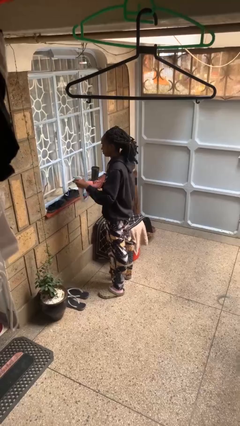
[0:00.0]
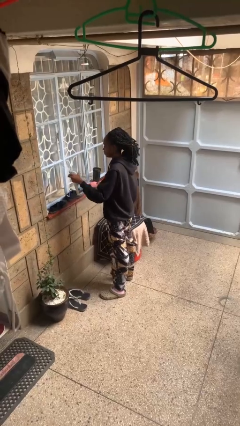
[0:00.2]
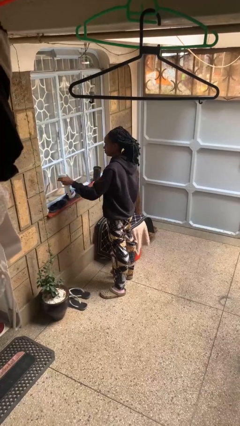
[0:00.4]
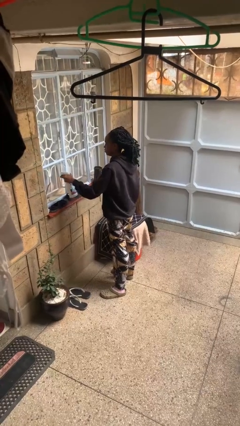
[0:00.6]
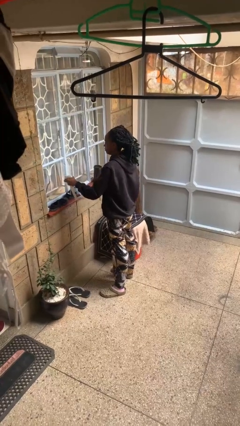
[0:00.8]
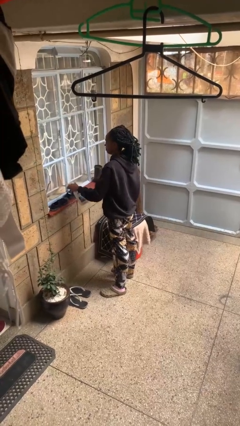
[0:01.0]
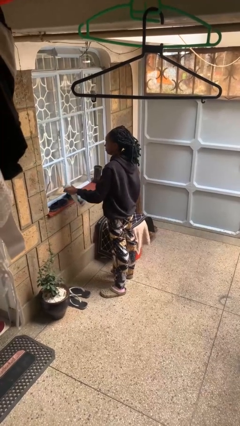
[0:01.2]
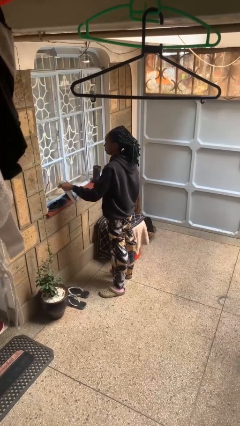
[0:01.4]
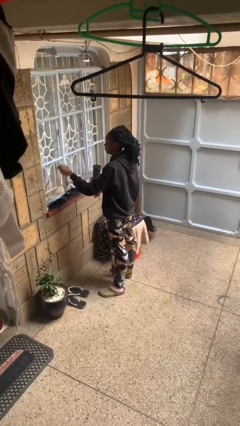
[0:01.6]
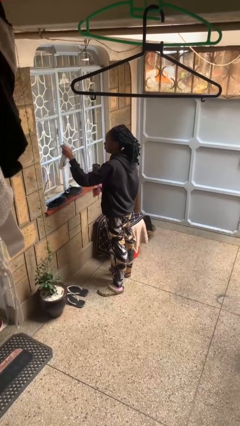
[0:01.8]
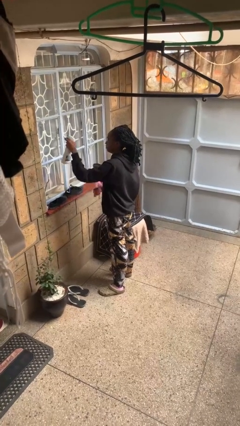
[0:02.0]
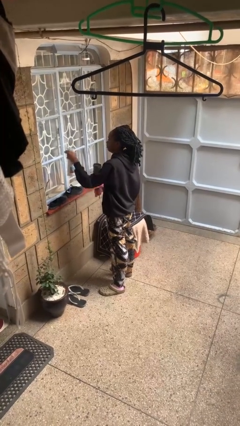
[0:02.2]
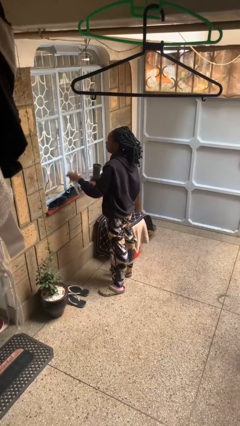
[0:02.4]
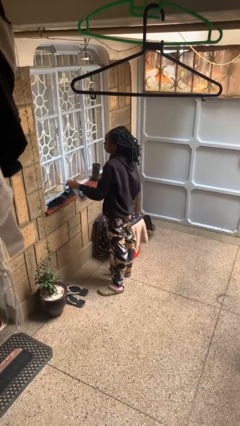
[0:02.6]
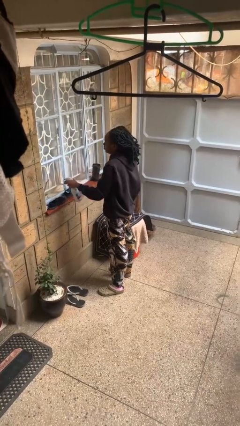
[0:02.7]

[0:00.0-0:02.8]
person sprays from bottle

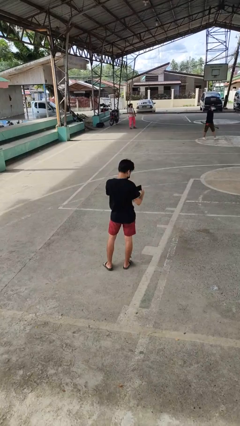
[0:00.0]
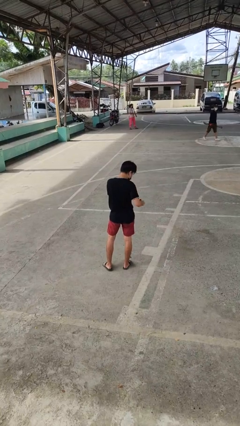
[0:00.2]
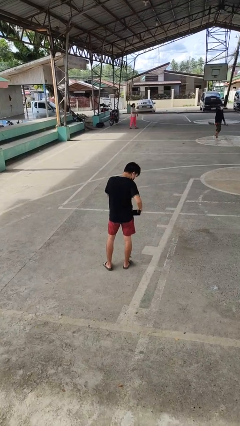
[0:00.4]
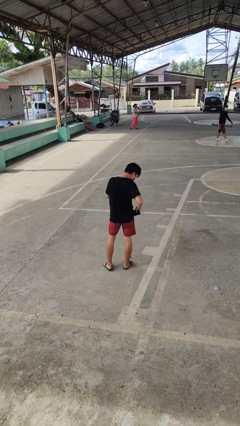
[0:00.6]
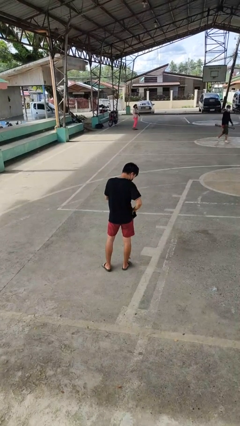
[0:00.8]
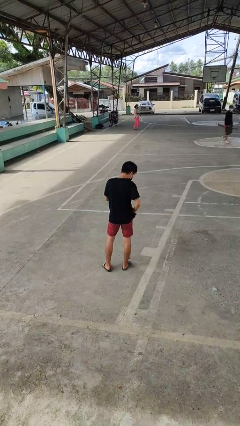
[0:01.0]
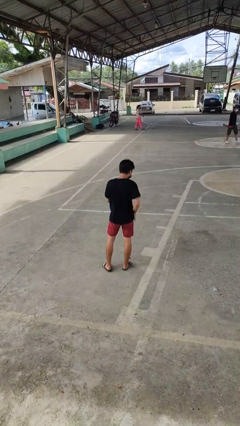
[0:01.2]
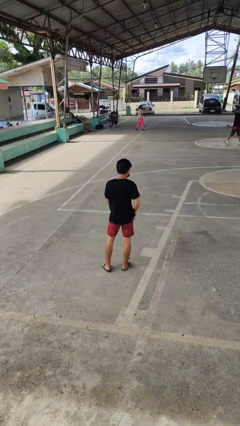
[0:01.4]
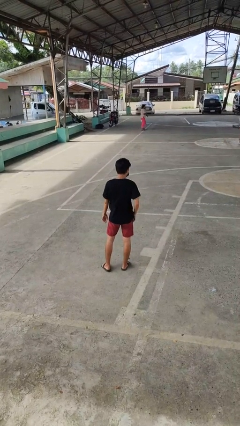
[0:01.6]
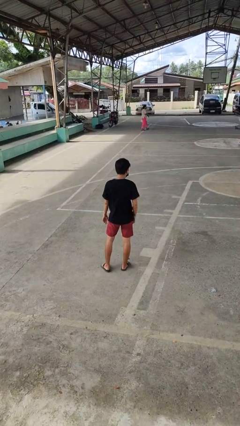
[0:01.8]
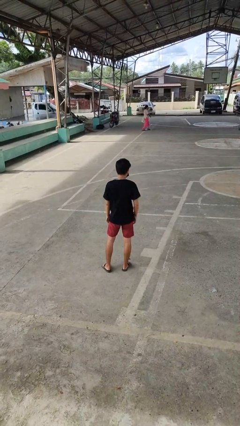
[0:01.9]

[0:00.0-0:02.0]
person puts phone into pocket

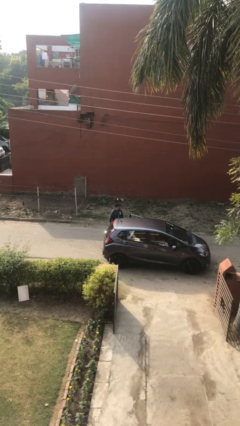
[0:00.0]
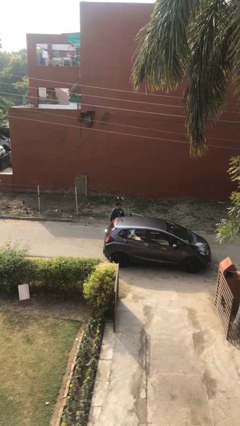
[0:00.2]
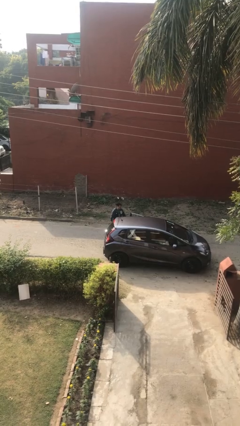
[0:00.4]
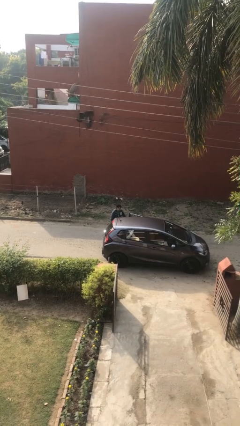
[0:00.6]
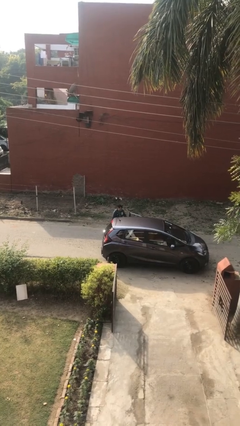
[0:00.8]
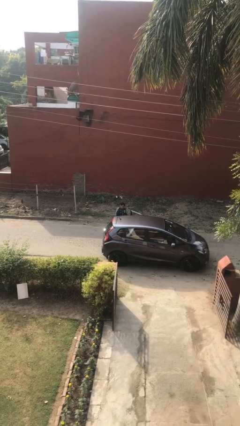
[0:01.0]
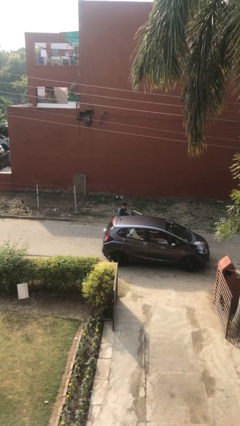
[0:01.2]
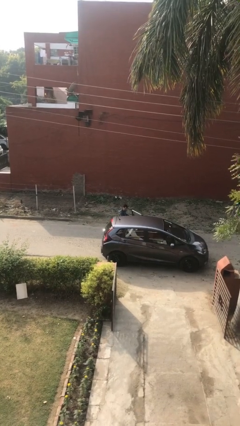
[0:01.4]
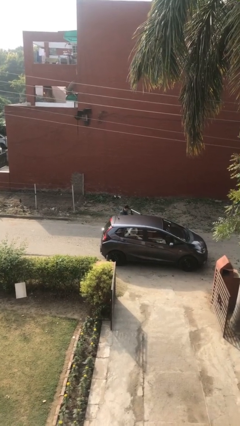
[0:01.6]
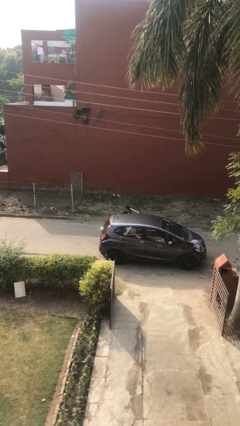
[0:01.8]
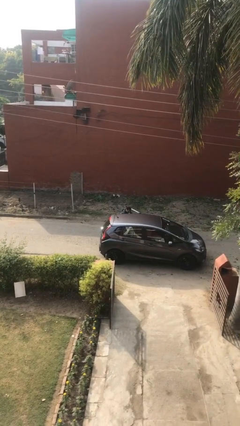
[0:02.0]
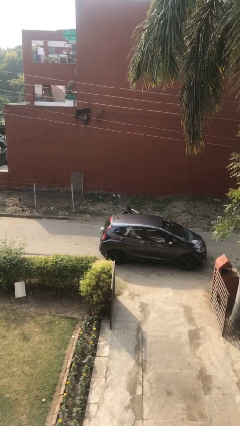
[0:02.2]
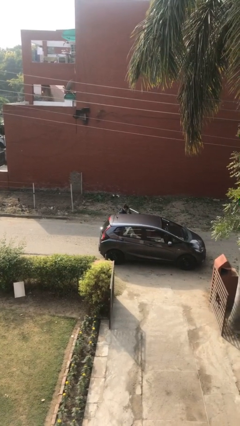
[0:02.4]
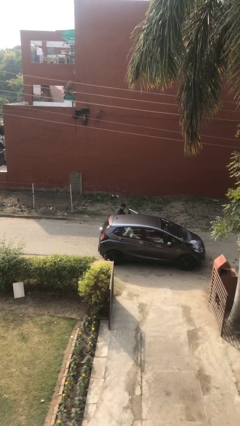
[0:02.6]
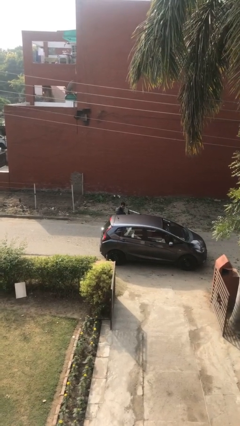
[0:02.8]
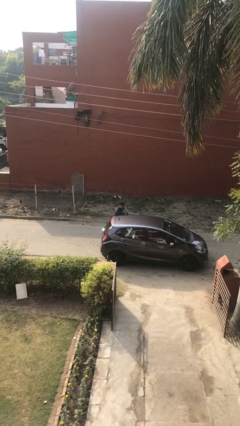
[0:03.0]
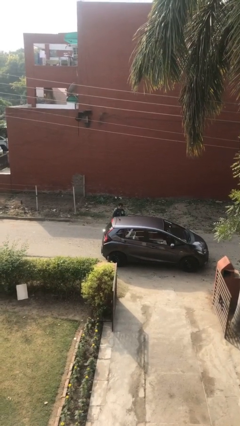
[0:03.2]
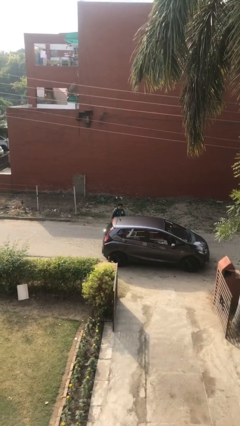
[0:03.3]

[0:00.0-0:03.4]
person loads car

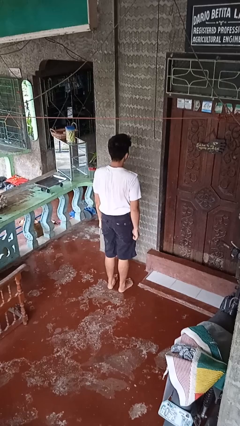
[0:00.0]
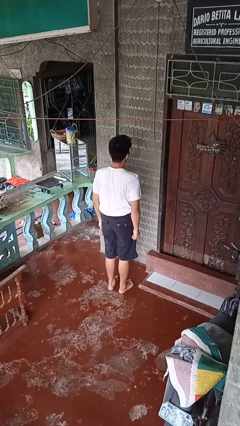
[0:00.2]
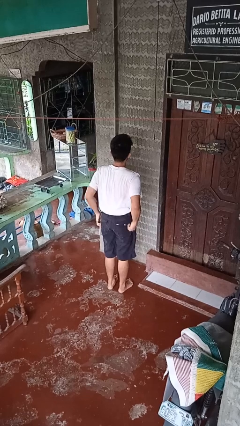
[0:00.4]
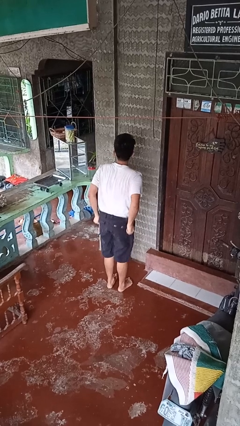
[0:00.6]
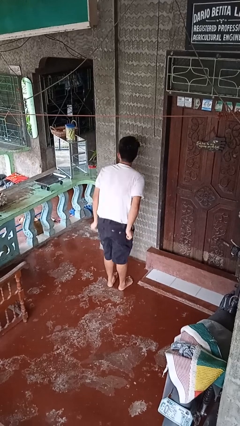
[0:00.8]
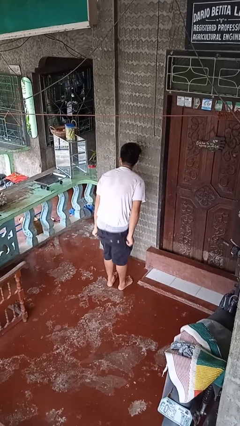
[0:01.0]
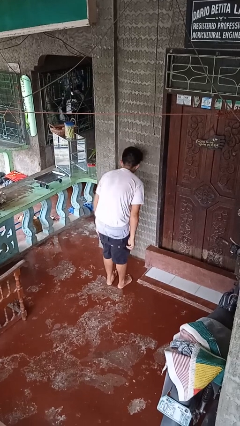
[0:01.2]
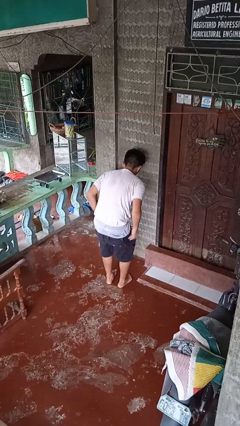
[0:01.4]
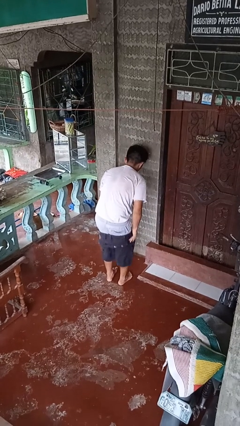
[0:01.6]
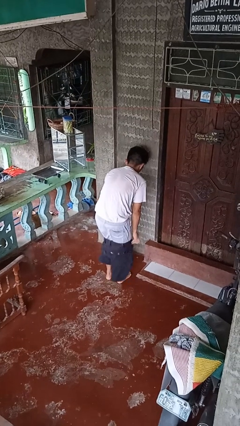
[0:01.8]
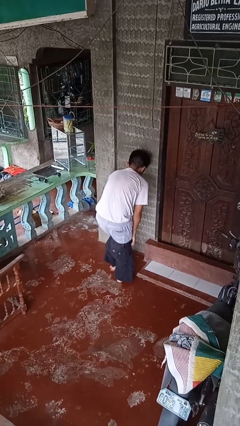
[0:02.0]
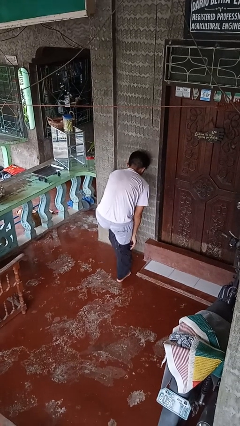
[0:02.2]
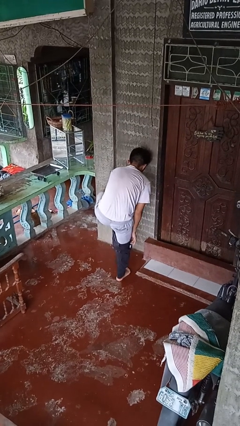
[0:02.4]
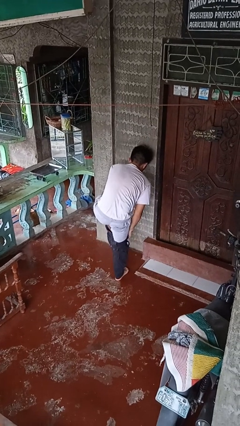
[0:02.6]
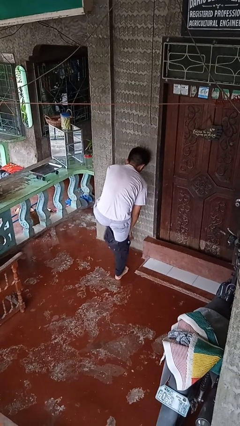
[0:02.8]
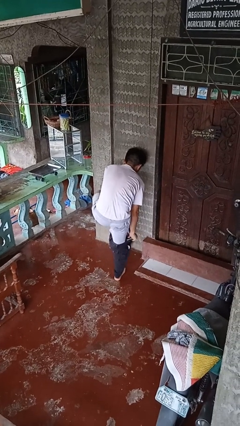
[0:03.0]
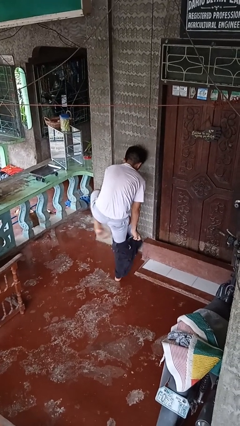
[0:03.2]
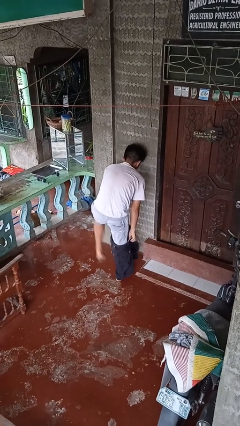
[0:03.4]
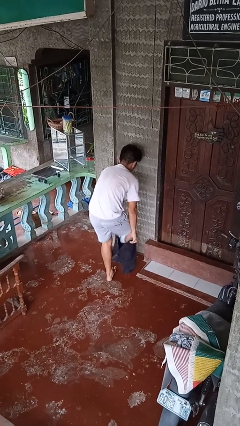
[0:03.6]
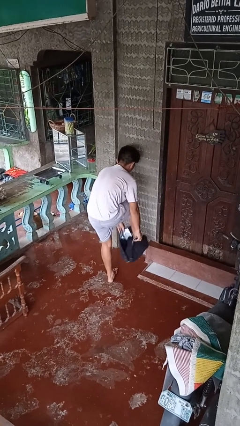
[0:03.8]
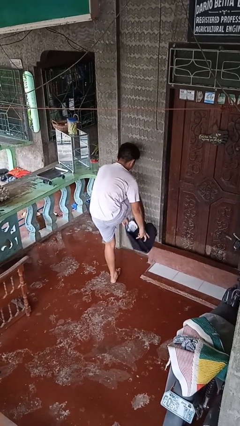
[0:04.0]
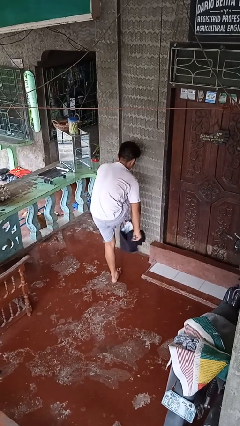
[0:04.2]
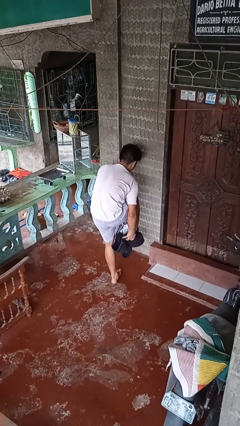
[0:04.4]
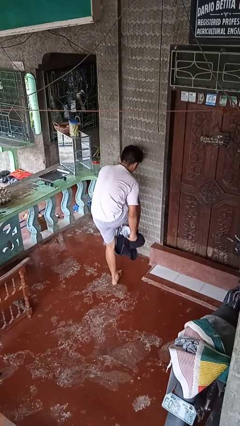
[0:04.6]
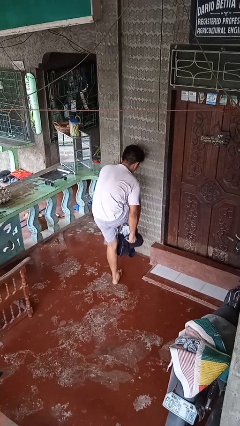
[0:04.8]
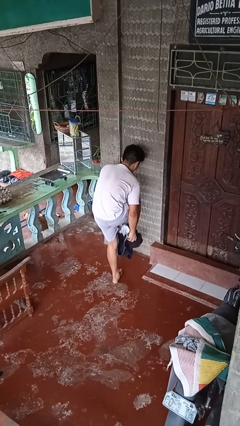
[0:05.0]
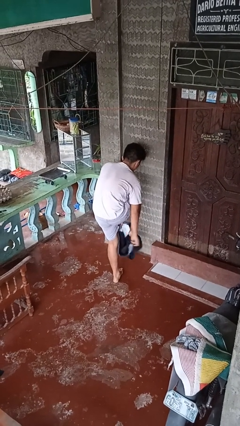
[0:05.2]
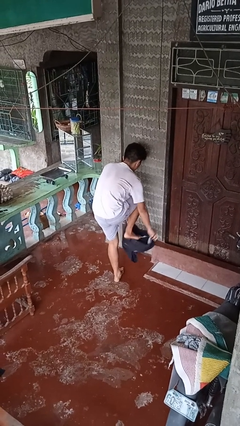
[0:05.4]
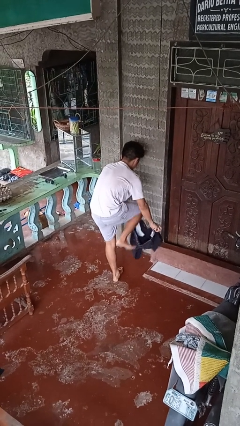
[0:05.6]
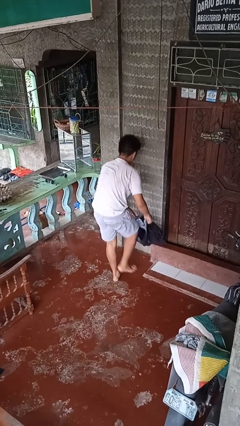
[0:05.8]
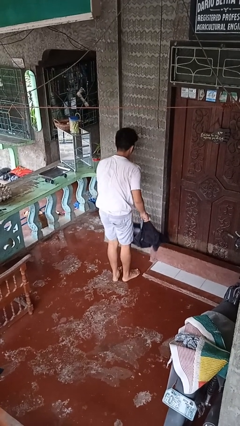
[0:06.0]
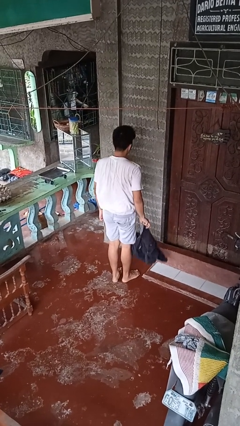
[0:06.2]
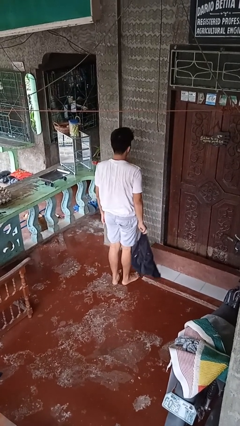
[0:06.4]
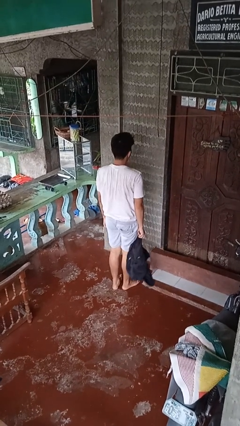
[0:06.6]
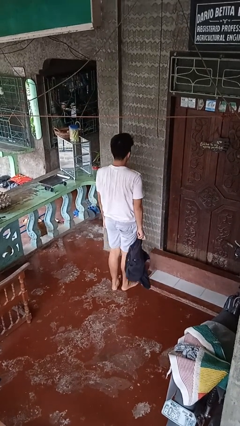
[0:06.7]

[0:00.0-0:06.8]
person takes off pants

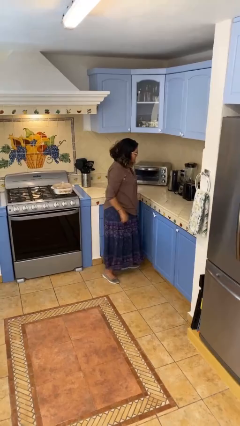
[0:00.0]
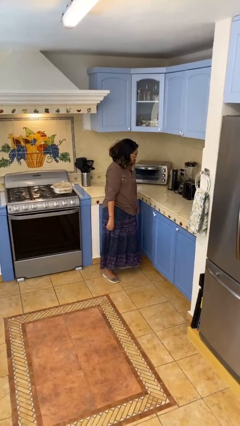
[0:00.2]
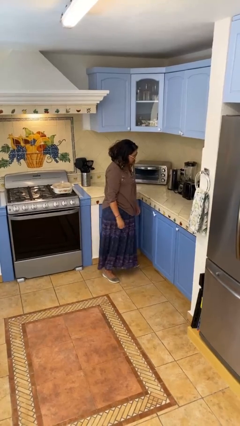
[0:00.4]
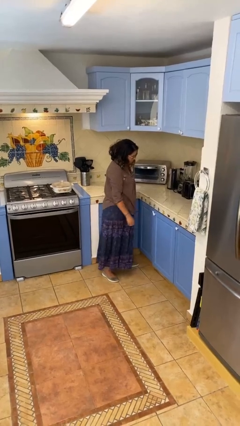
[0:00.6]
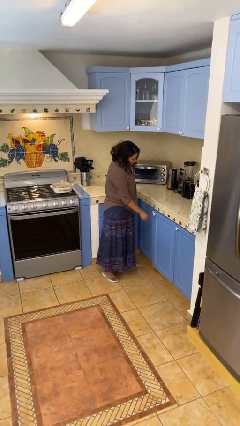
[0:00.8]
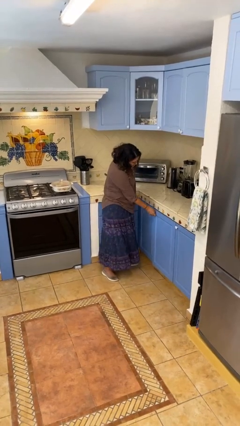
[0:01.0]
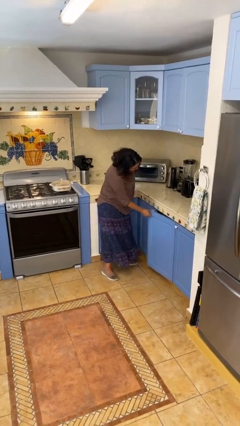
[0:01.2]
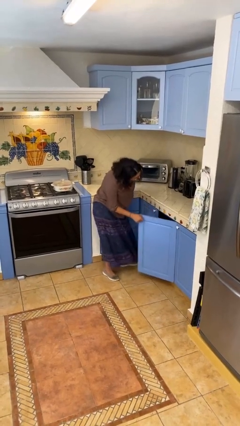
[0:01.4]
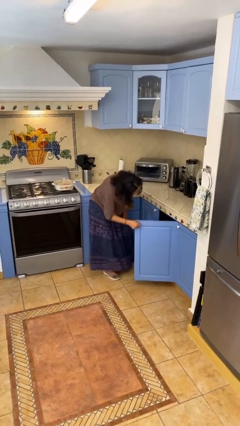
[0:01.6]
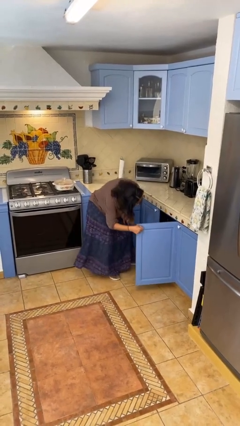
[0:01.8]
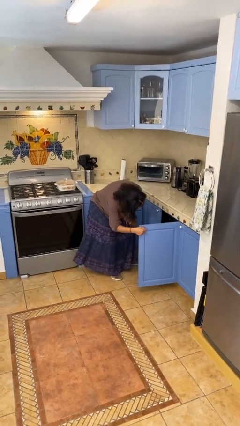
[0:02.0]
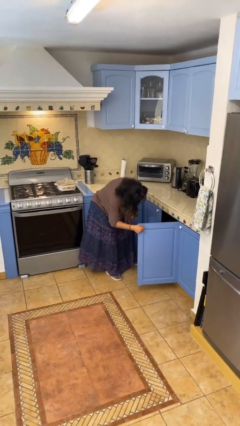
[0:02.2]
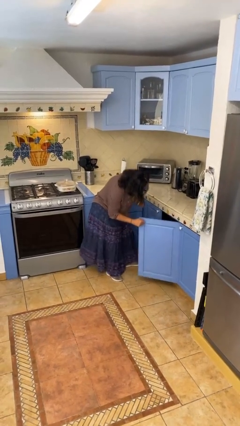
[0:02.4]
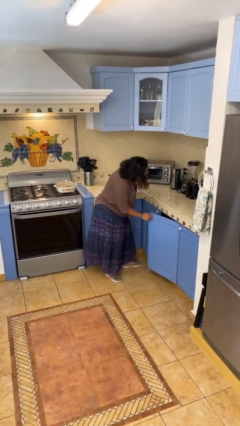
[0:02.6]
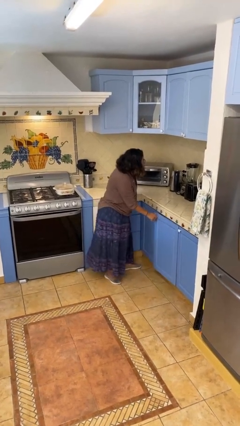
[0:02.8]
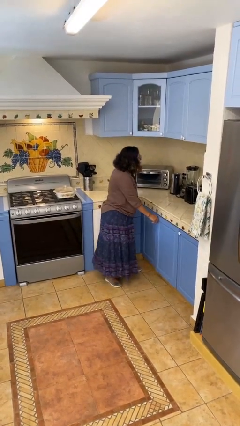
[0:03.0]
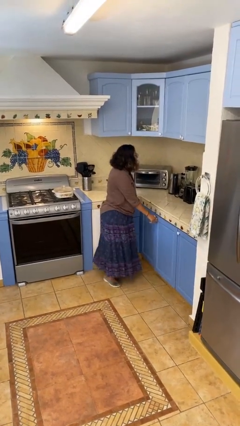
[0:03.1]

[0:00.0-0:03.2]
person closes cabinet
